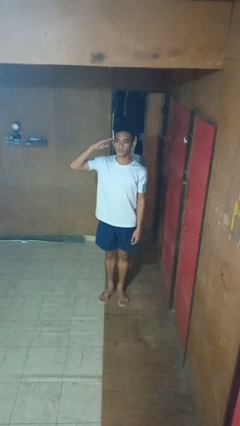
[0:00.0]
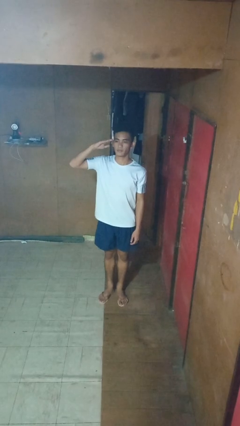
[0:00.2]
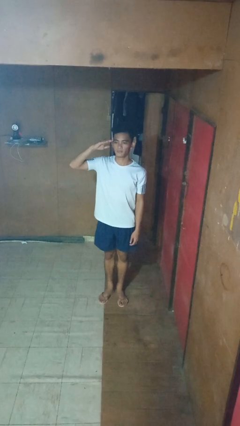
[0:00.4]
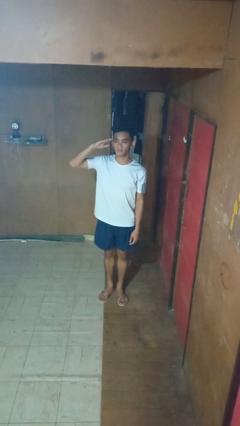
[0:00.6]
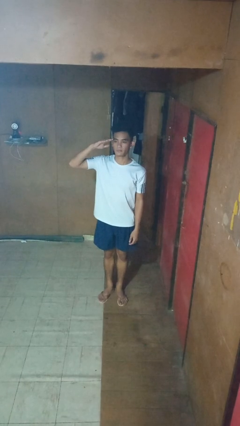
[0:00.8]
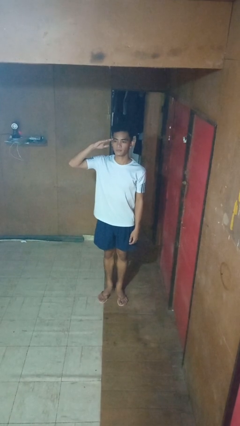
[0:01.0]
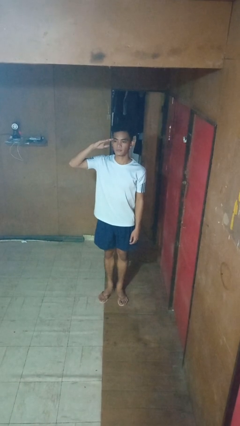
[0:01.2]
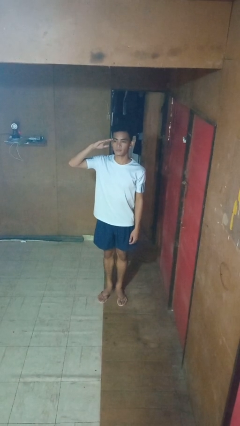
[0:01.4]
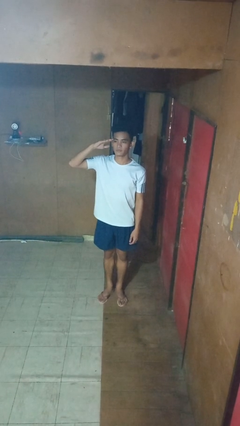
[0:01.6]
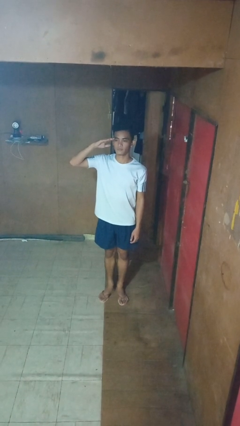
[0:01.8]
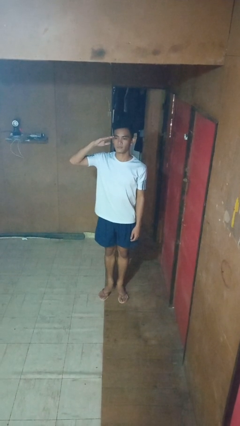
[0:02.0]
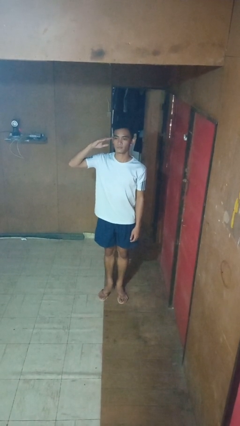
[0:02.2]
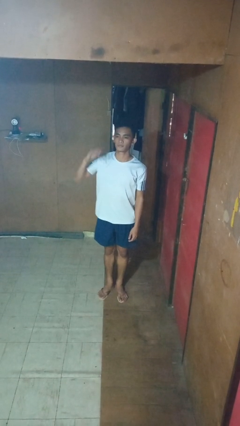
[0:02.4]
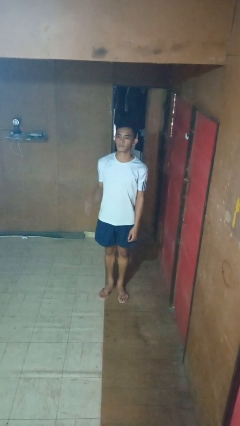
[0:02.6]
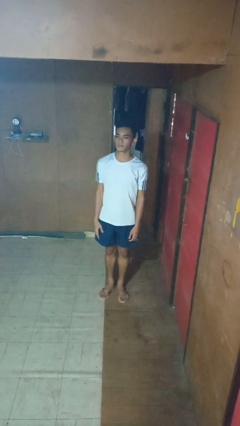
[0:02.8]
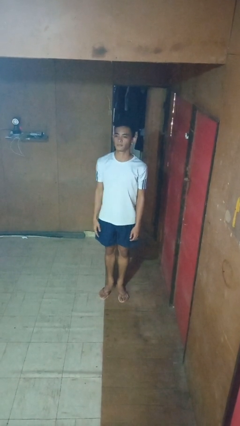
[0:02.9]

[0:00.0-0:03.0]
person salutes

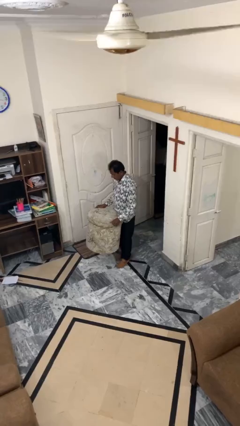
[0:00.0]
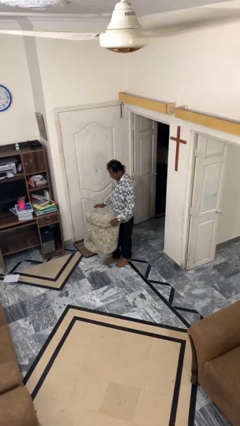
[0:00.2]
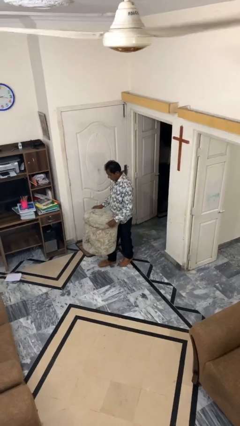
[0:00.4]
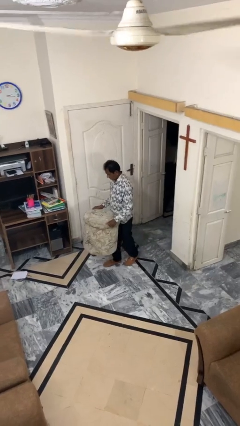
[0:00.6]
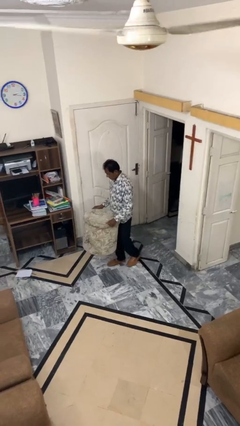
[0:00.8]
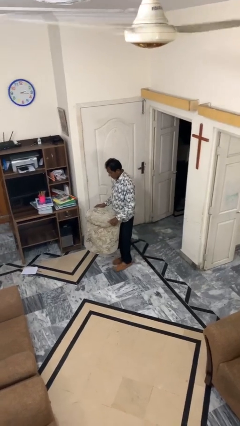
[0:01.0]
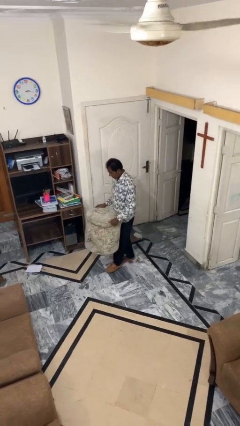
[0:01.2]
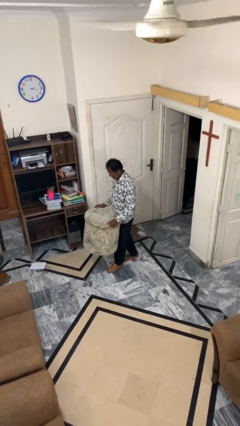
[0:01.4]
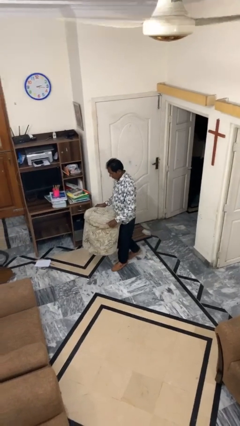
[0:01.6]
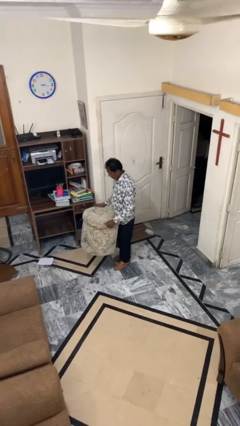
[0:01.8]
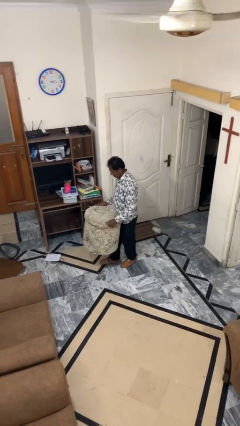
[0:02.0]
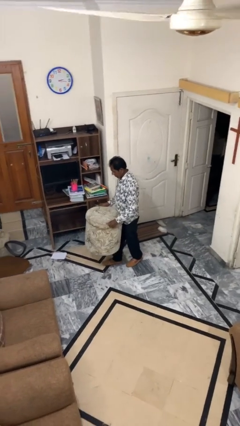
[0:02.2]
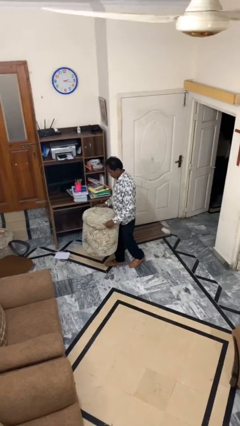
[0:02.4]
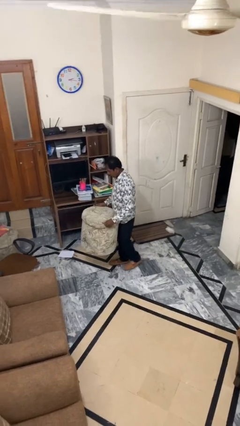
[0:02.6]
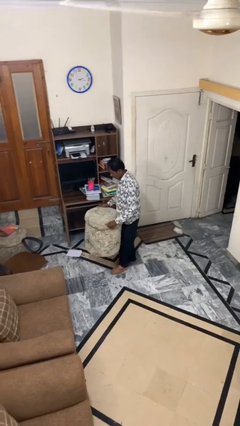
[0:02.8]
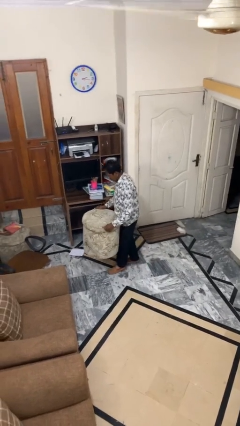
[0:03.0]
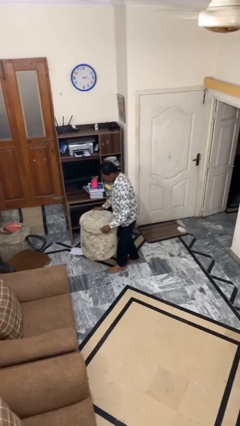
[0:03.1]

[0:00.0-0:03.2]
person carries heavy object

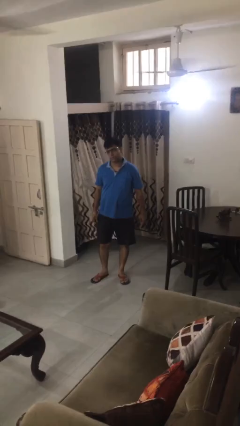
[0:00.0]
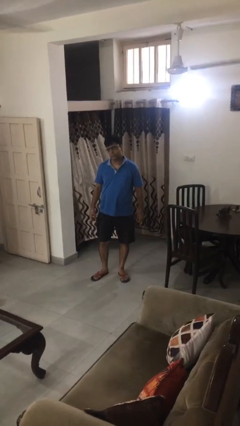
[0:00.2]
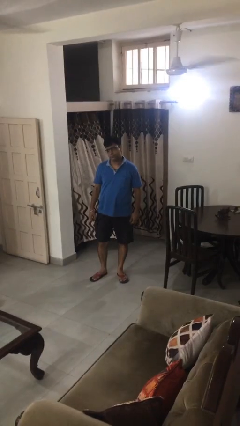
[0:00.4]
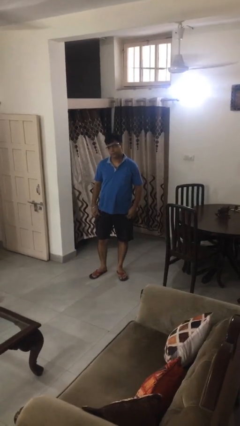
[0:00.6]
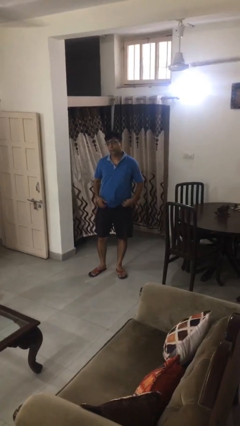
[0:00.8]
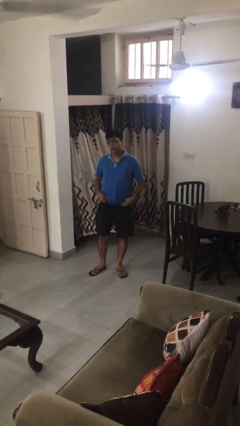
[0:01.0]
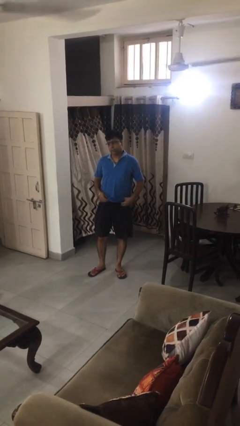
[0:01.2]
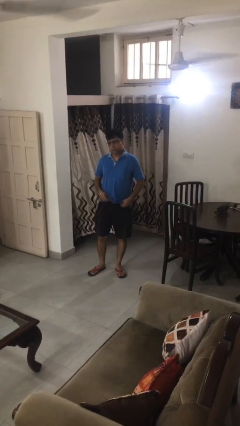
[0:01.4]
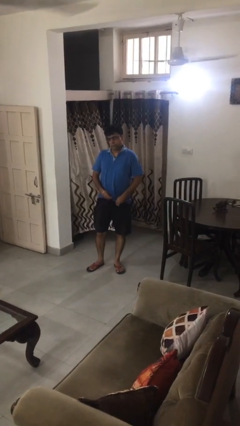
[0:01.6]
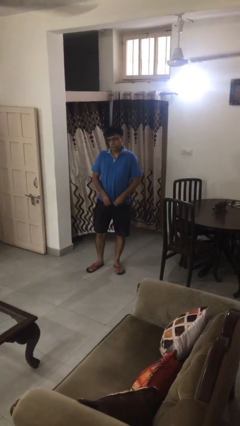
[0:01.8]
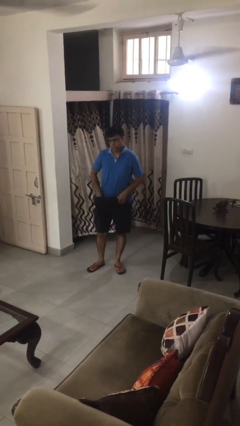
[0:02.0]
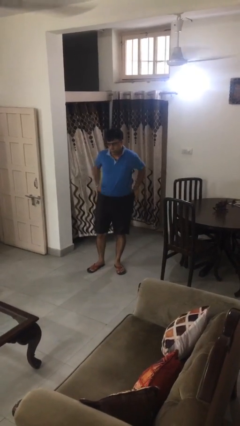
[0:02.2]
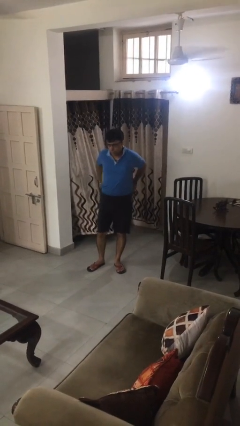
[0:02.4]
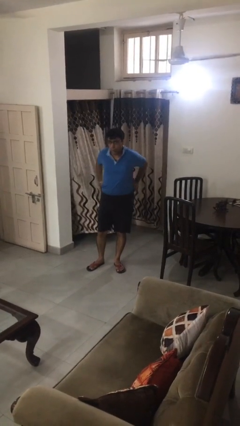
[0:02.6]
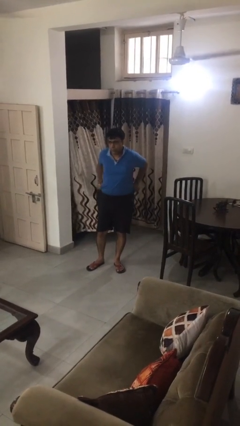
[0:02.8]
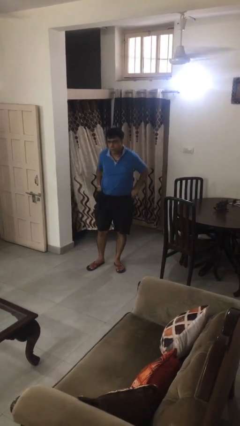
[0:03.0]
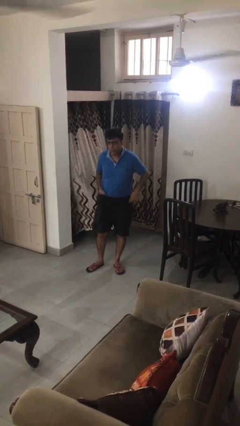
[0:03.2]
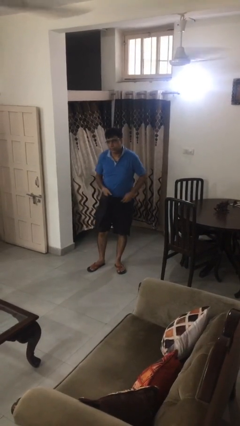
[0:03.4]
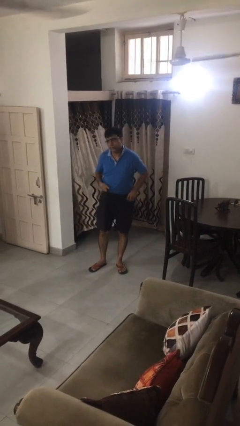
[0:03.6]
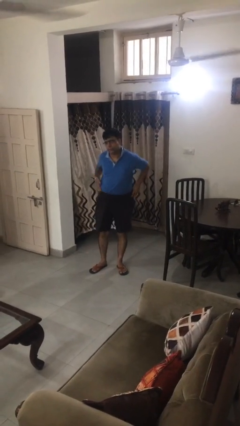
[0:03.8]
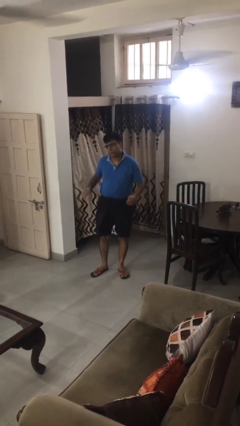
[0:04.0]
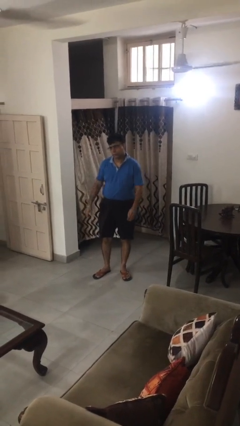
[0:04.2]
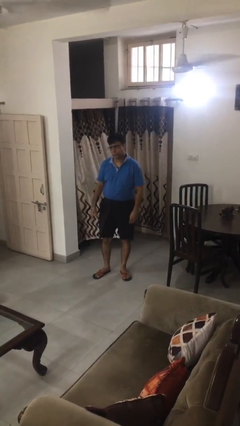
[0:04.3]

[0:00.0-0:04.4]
person tucks in shirt

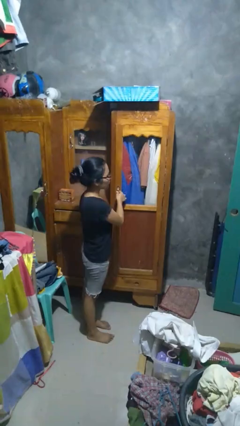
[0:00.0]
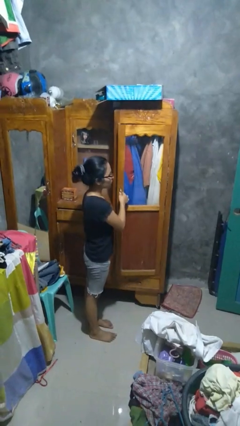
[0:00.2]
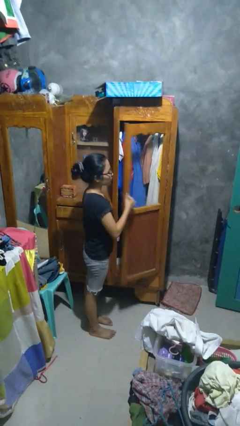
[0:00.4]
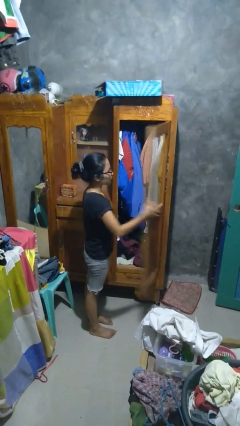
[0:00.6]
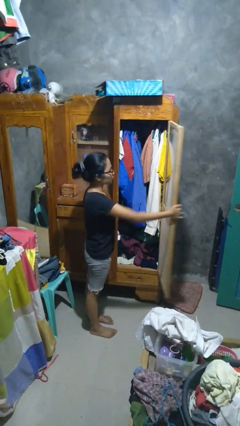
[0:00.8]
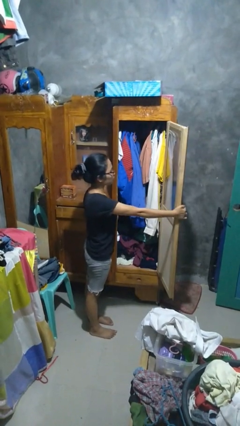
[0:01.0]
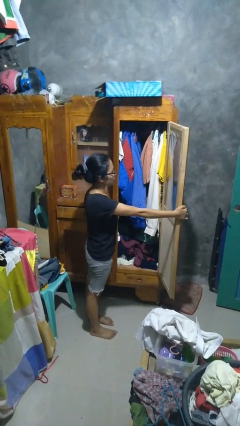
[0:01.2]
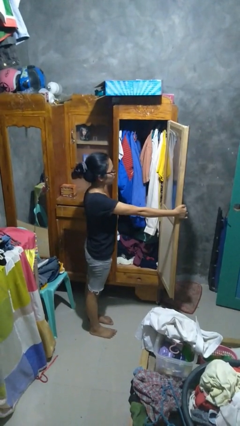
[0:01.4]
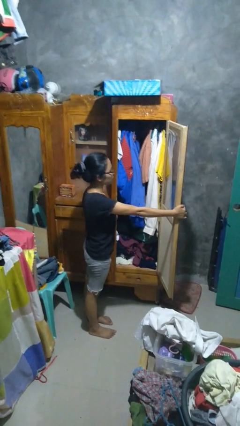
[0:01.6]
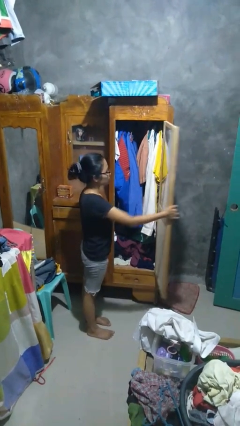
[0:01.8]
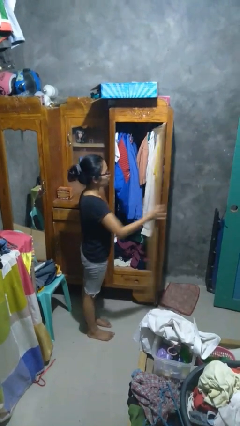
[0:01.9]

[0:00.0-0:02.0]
person opens closet door

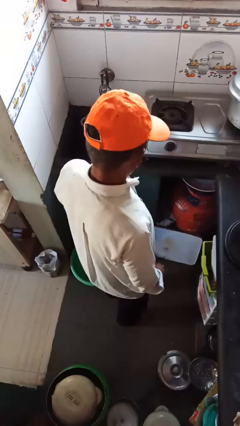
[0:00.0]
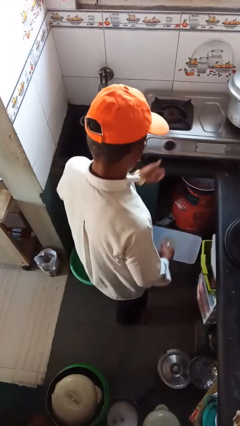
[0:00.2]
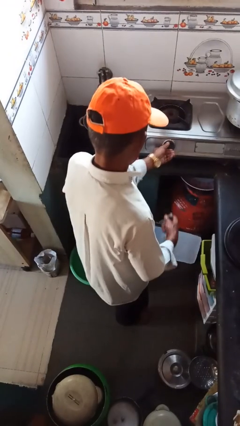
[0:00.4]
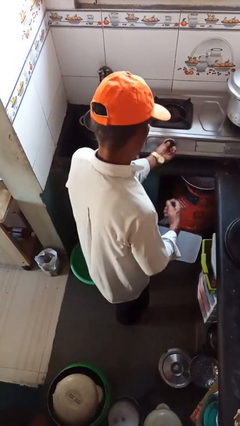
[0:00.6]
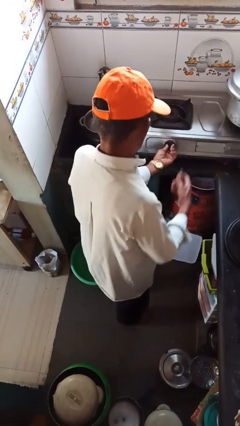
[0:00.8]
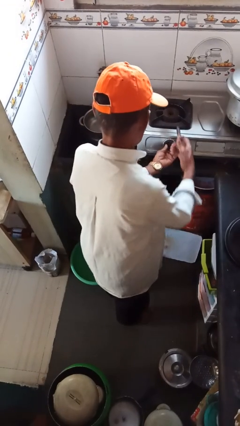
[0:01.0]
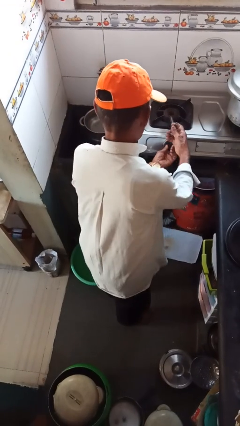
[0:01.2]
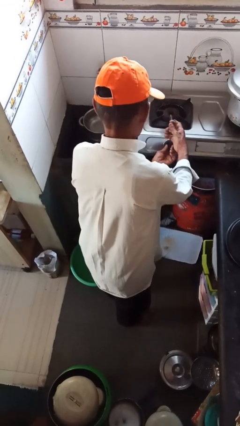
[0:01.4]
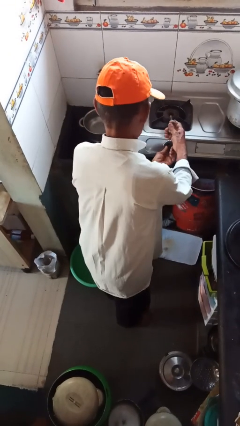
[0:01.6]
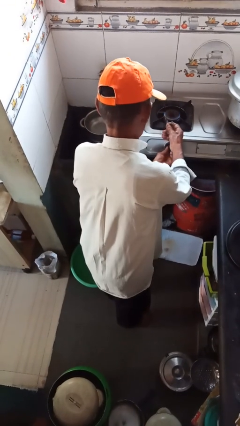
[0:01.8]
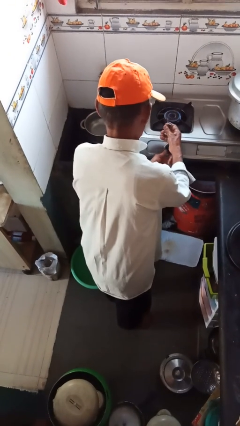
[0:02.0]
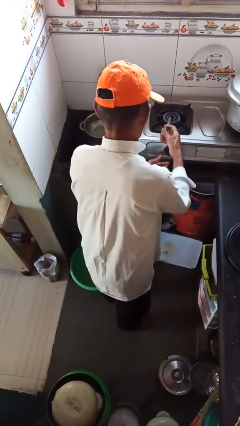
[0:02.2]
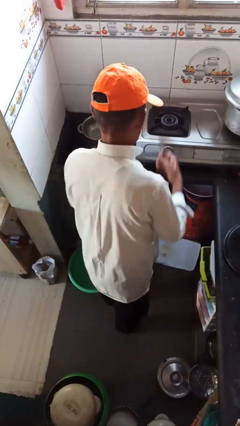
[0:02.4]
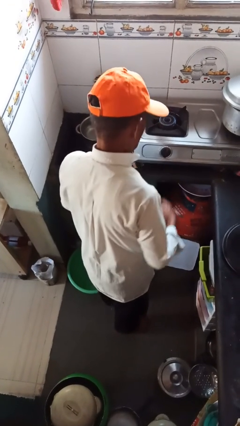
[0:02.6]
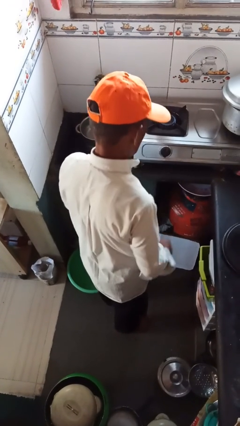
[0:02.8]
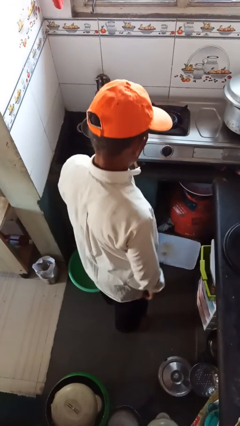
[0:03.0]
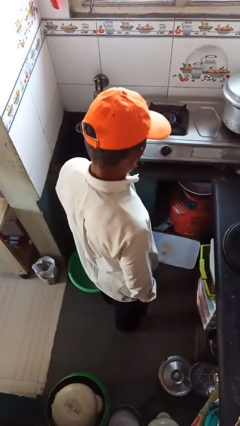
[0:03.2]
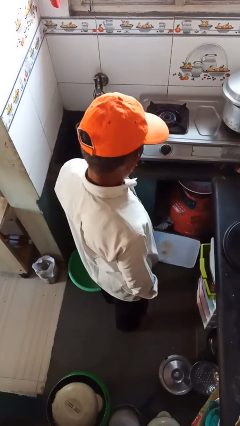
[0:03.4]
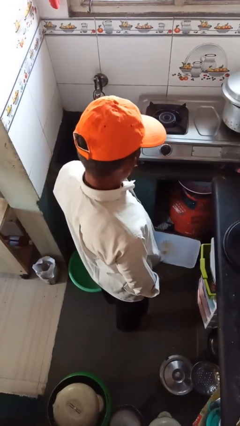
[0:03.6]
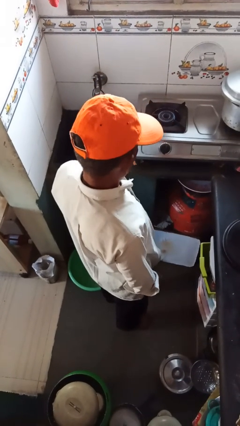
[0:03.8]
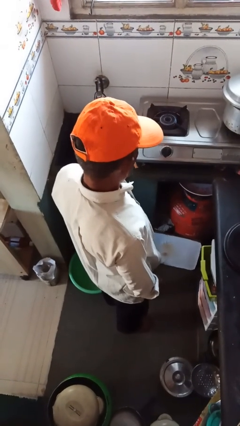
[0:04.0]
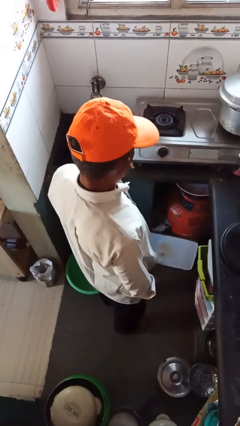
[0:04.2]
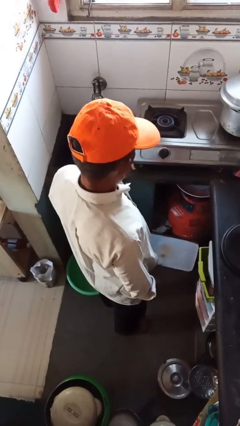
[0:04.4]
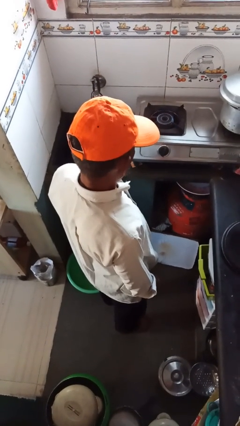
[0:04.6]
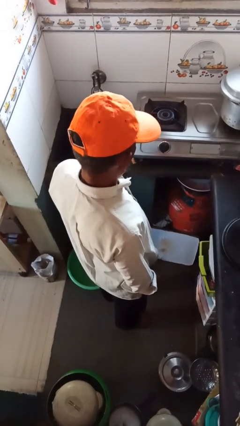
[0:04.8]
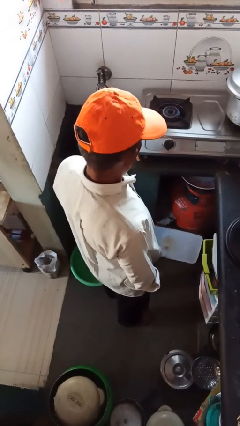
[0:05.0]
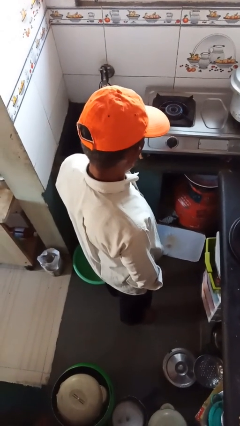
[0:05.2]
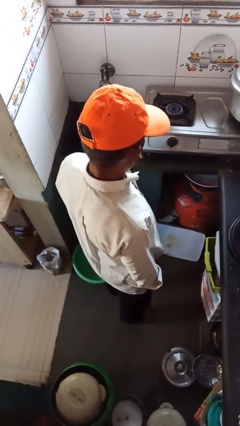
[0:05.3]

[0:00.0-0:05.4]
person turns on stovetop
